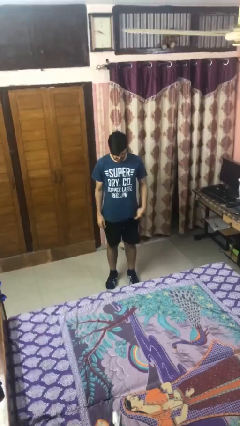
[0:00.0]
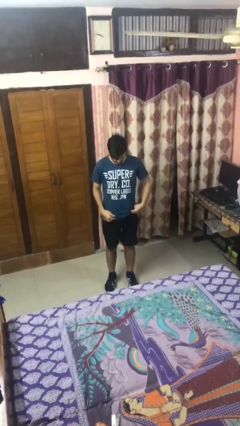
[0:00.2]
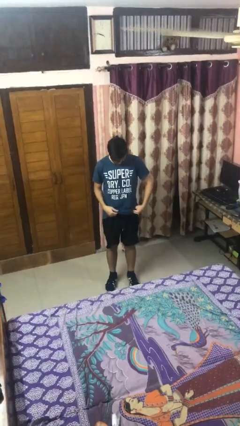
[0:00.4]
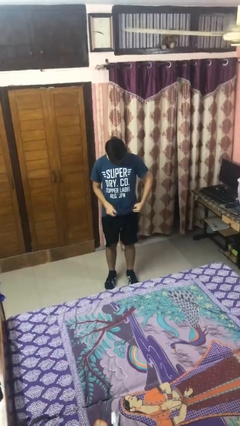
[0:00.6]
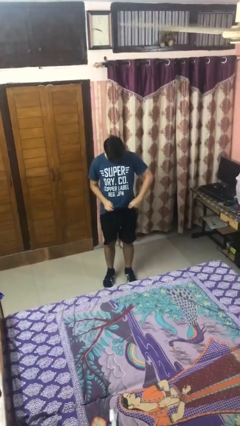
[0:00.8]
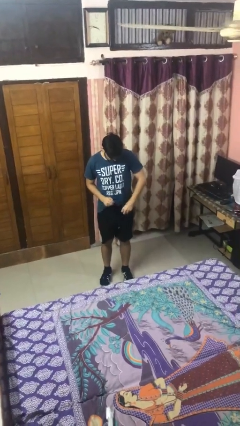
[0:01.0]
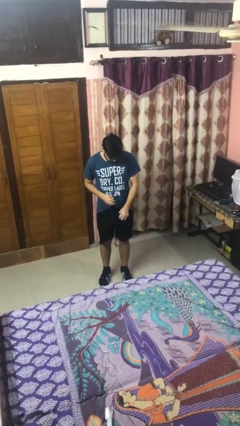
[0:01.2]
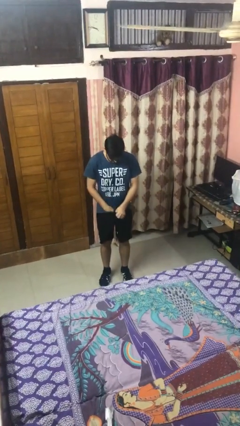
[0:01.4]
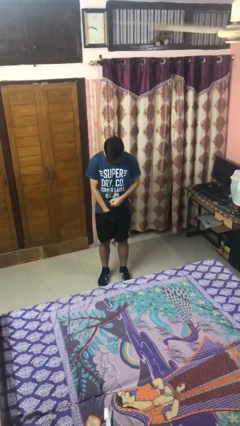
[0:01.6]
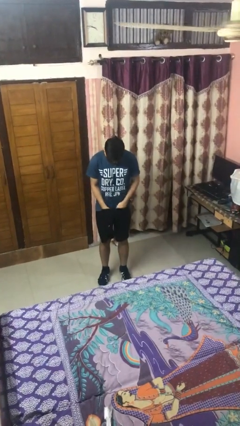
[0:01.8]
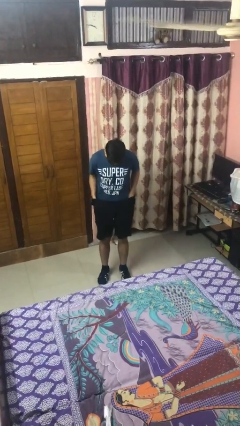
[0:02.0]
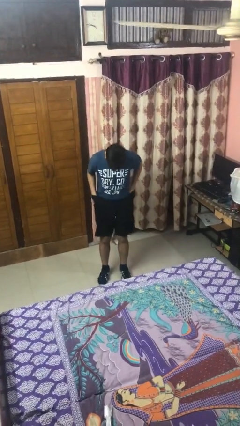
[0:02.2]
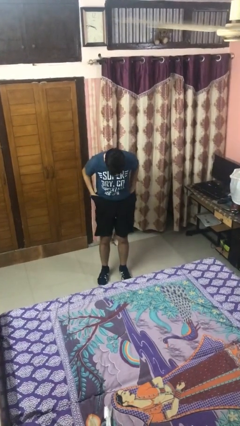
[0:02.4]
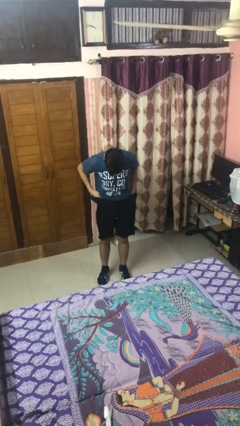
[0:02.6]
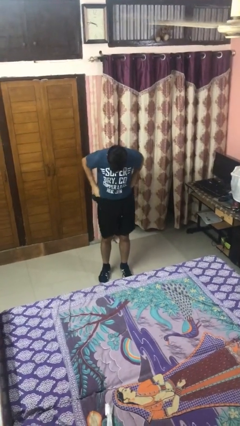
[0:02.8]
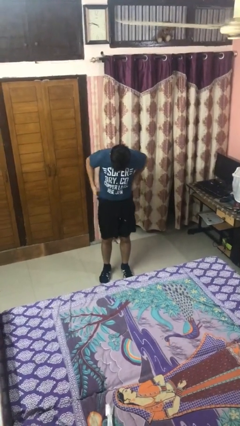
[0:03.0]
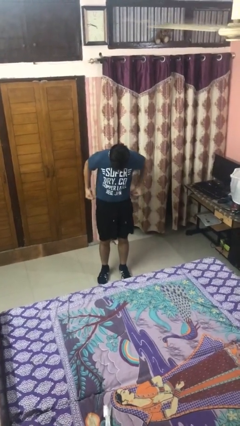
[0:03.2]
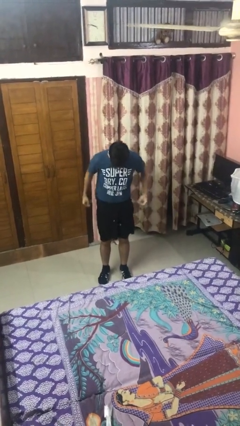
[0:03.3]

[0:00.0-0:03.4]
person tucks in shirt

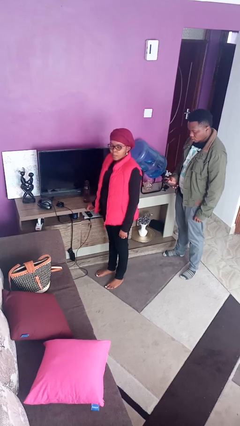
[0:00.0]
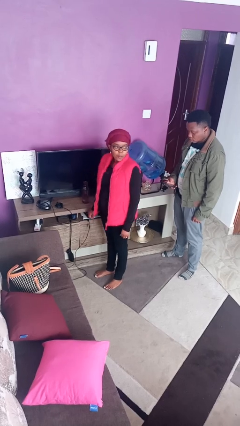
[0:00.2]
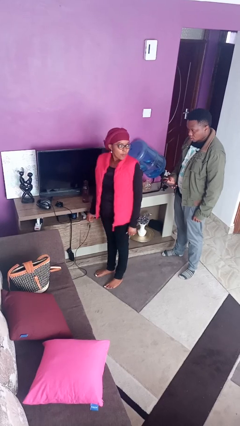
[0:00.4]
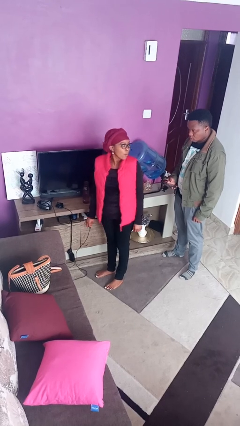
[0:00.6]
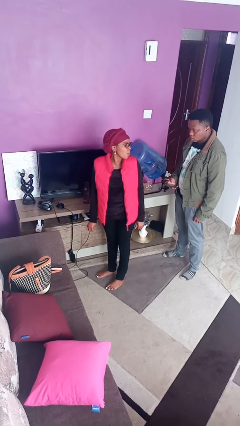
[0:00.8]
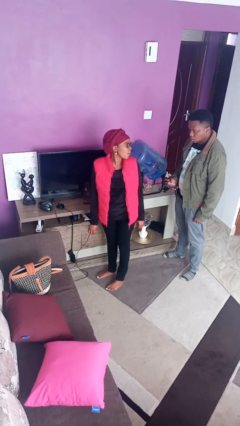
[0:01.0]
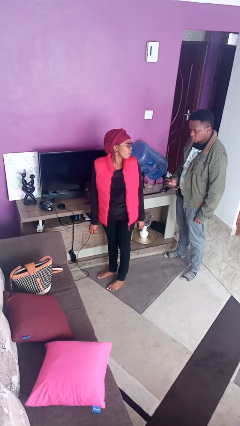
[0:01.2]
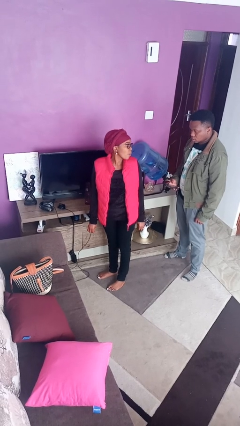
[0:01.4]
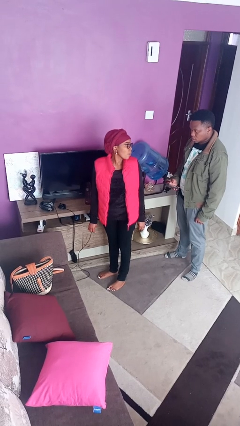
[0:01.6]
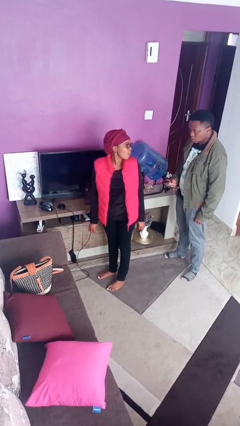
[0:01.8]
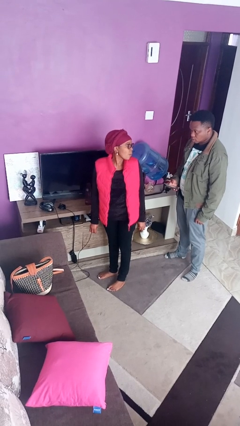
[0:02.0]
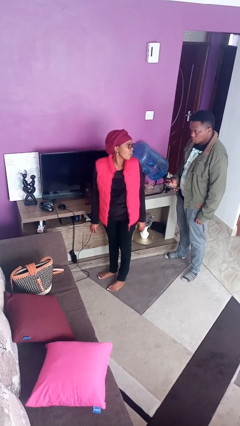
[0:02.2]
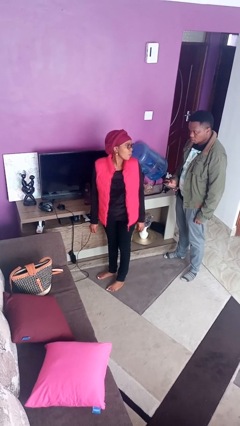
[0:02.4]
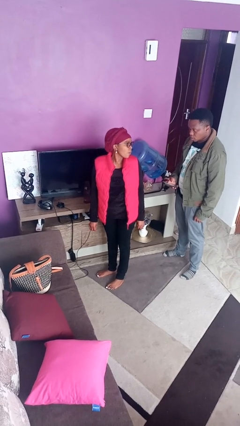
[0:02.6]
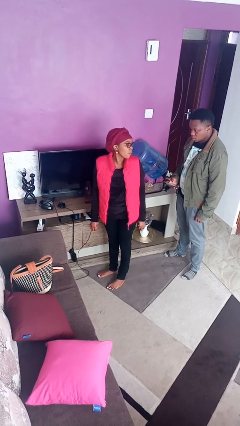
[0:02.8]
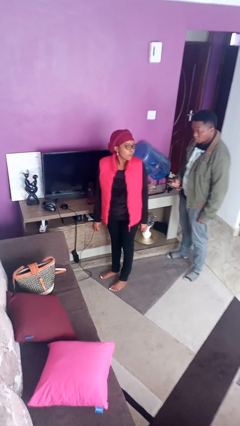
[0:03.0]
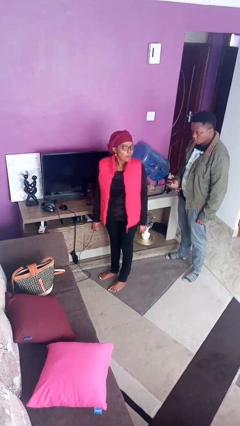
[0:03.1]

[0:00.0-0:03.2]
person looks over shoulder

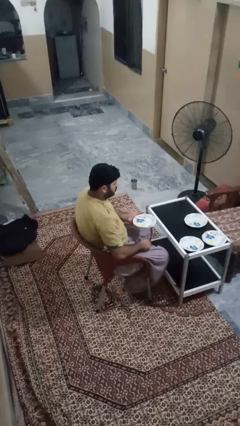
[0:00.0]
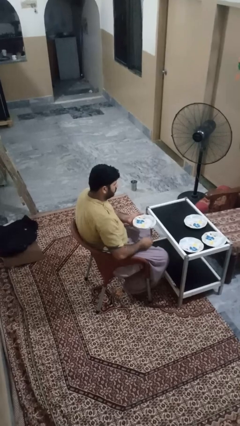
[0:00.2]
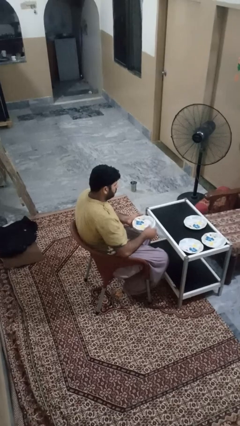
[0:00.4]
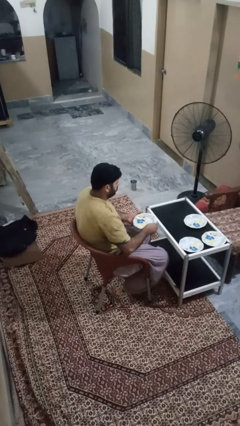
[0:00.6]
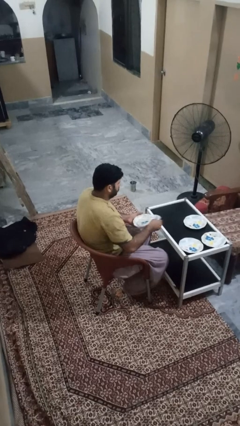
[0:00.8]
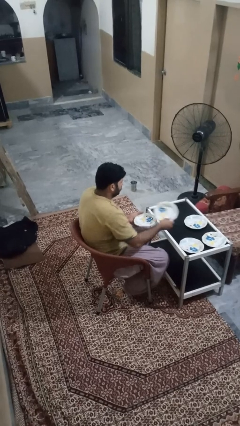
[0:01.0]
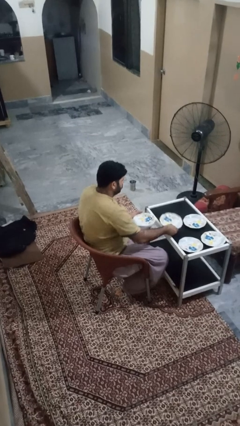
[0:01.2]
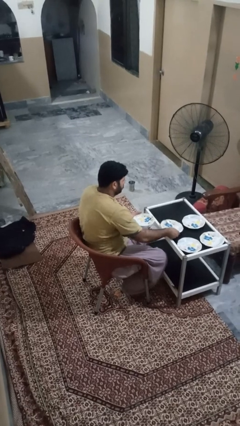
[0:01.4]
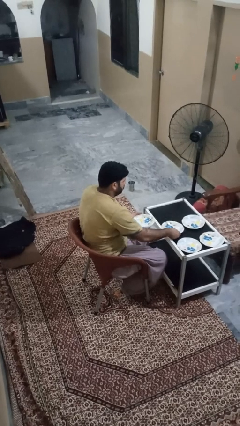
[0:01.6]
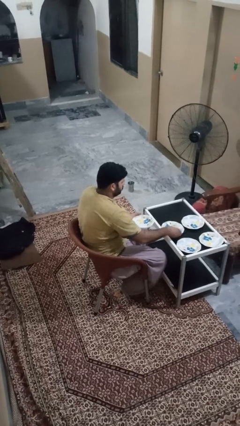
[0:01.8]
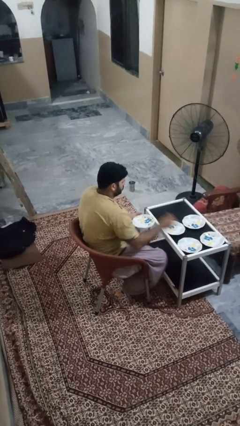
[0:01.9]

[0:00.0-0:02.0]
person sets table

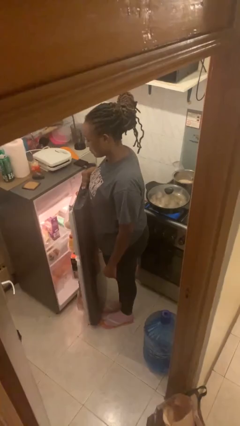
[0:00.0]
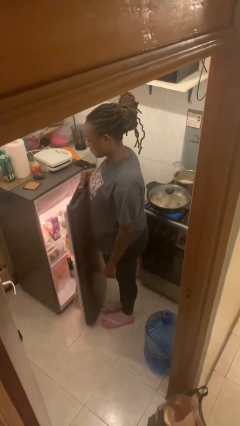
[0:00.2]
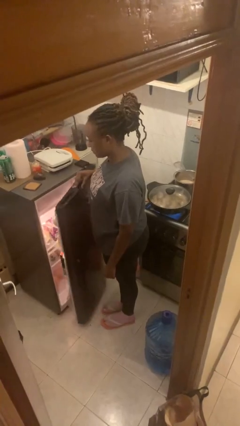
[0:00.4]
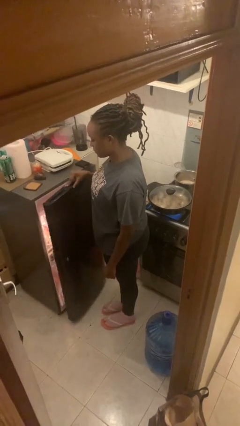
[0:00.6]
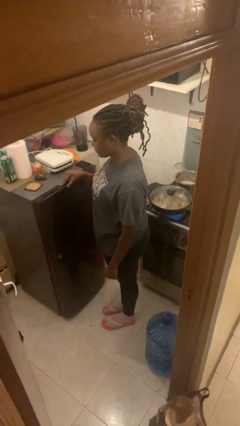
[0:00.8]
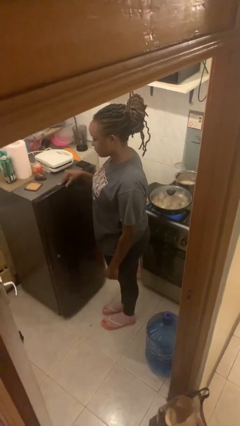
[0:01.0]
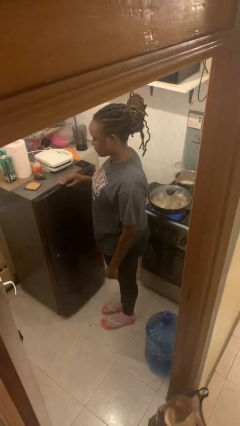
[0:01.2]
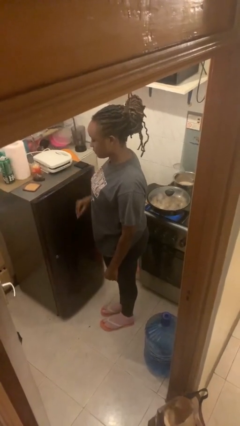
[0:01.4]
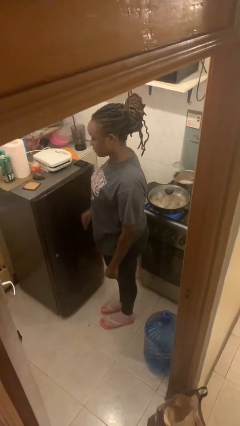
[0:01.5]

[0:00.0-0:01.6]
person closes refrigerator

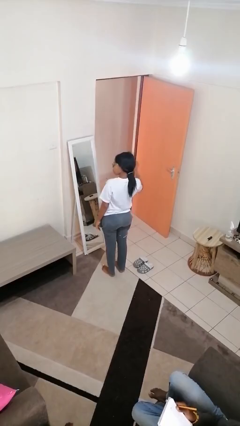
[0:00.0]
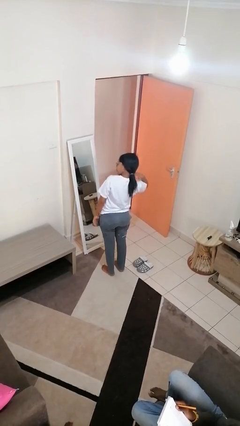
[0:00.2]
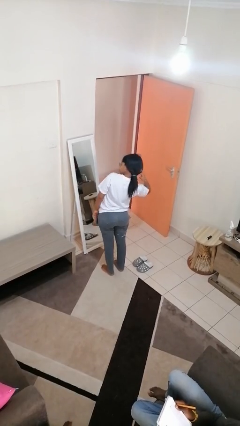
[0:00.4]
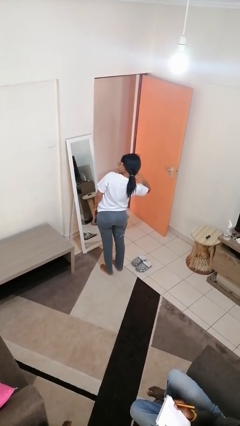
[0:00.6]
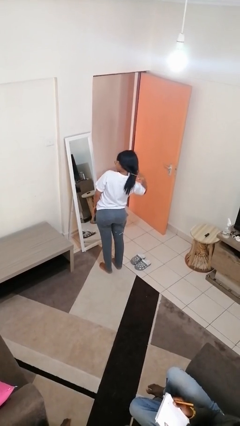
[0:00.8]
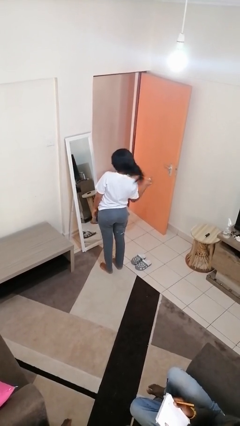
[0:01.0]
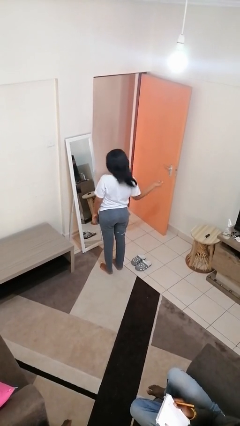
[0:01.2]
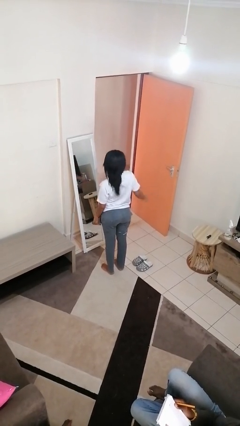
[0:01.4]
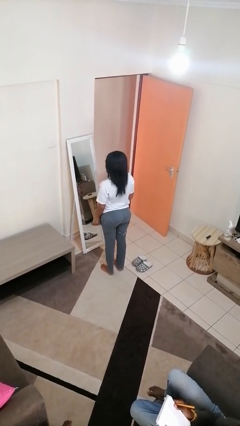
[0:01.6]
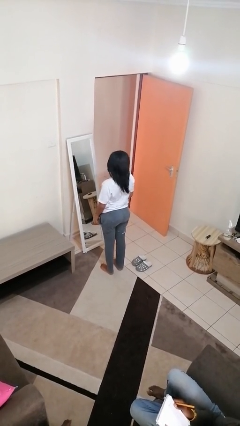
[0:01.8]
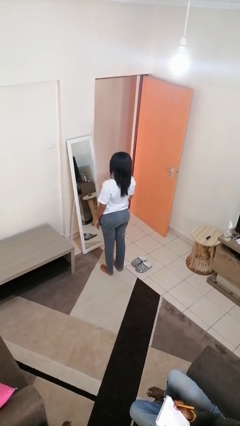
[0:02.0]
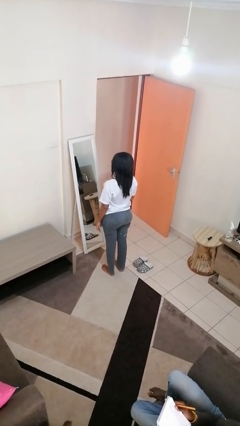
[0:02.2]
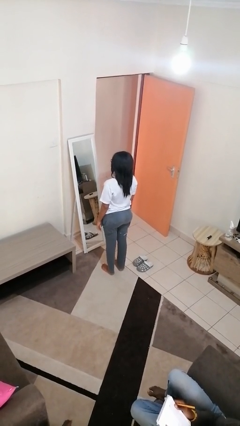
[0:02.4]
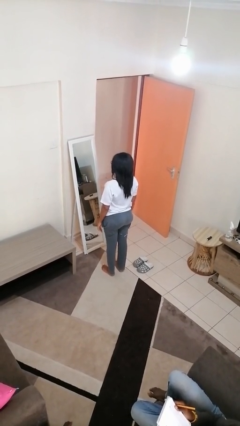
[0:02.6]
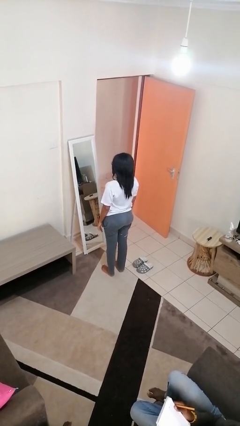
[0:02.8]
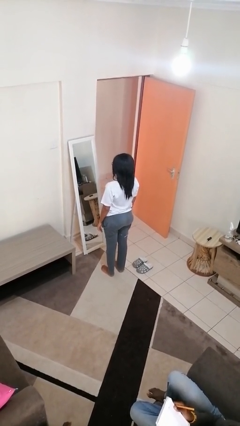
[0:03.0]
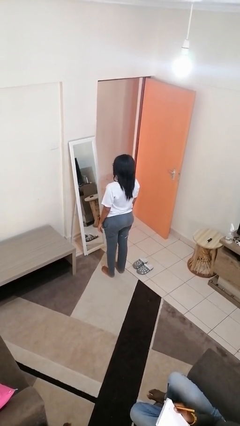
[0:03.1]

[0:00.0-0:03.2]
person takes off hairtie

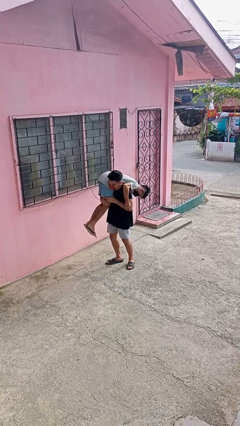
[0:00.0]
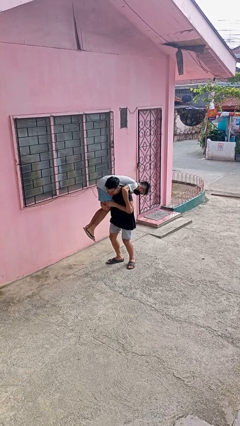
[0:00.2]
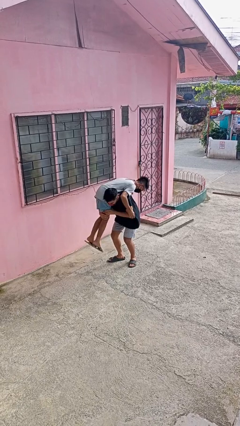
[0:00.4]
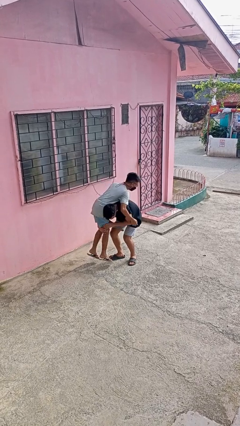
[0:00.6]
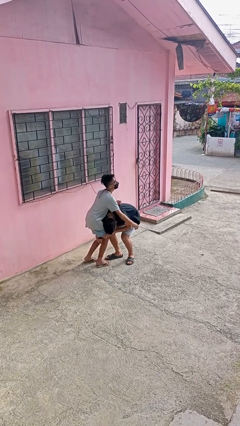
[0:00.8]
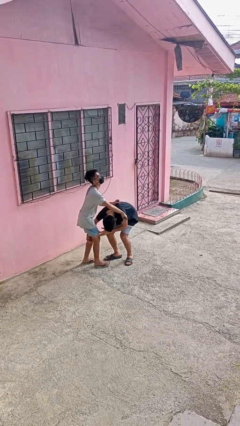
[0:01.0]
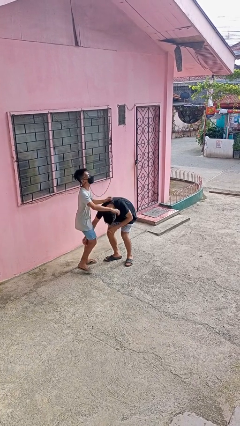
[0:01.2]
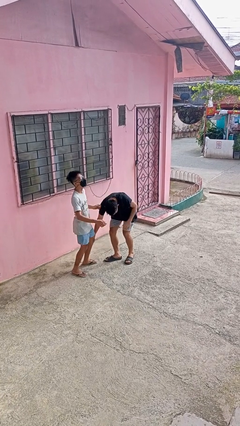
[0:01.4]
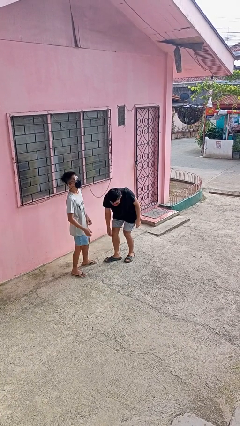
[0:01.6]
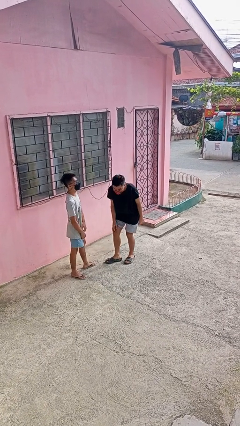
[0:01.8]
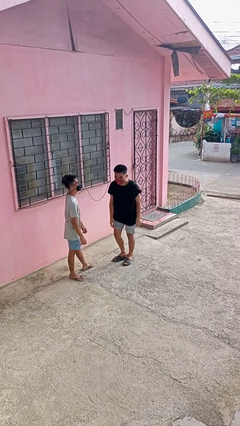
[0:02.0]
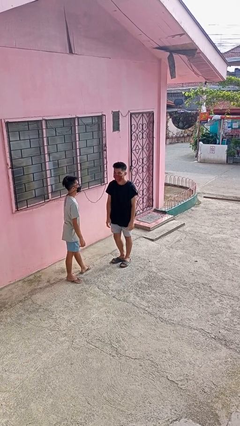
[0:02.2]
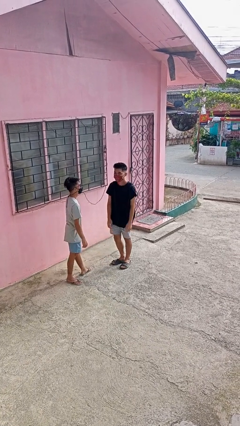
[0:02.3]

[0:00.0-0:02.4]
person puts down person

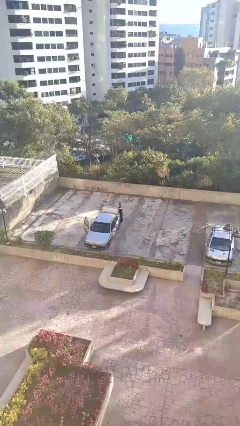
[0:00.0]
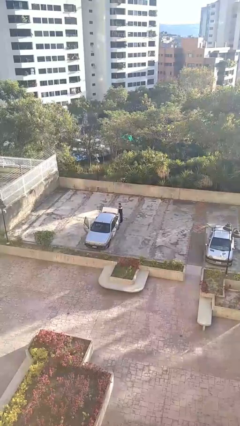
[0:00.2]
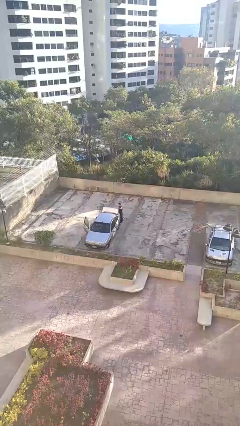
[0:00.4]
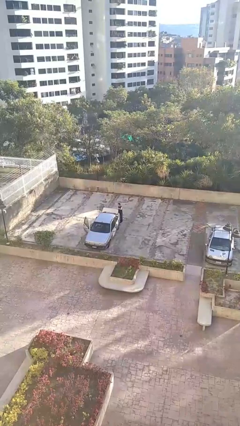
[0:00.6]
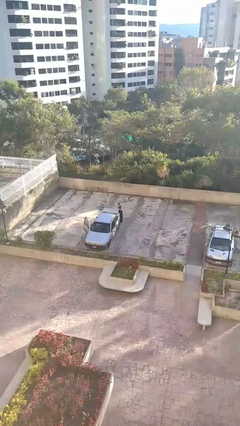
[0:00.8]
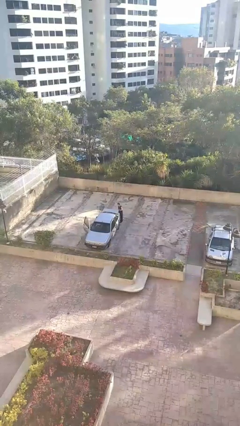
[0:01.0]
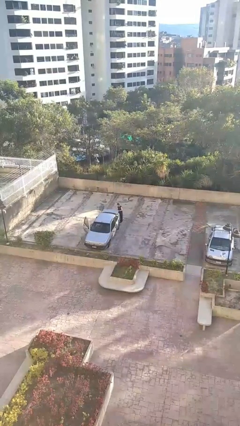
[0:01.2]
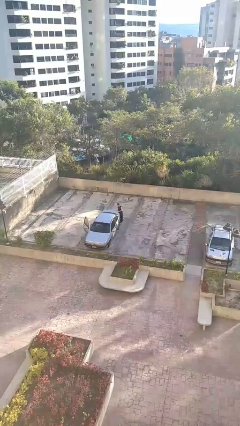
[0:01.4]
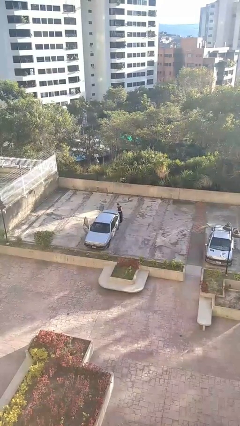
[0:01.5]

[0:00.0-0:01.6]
person closes car trunk
